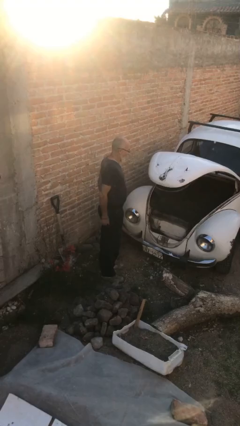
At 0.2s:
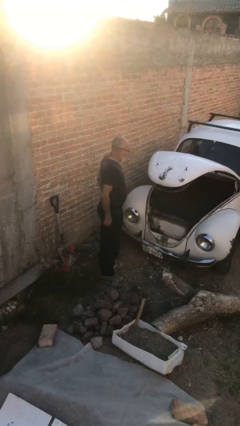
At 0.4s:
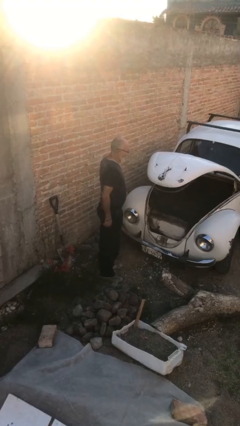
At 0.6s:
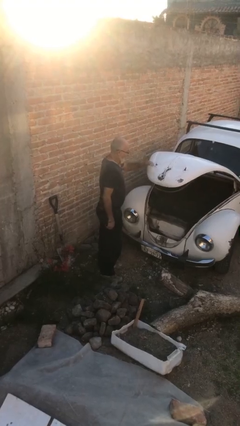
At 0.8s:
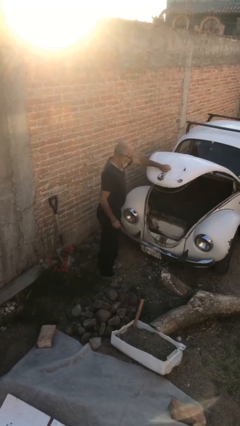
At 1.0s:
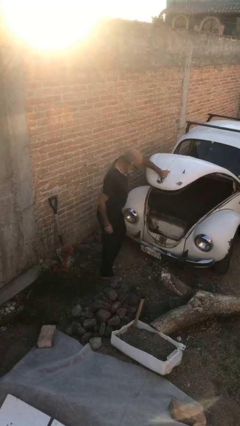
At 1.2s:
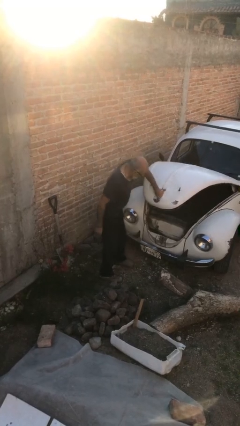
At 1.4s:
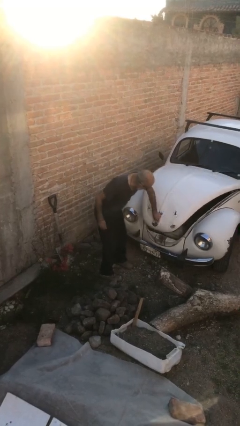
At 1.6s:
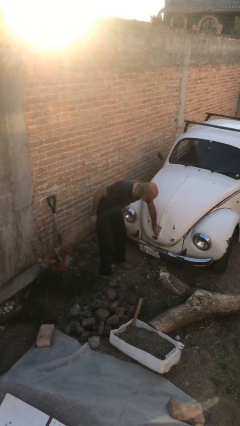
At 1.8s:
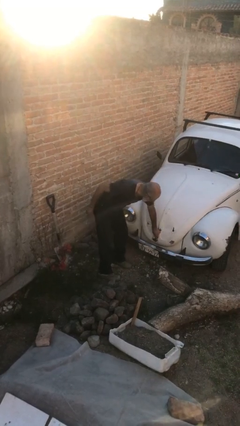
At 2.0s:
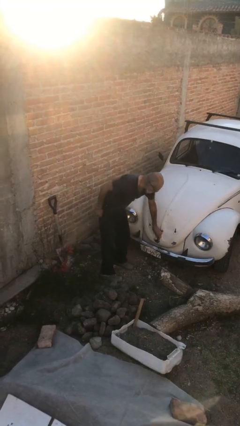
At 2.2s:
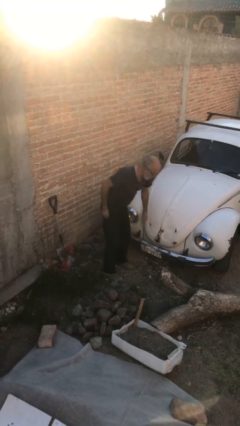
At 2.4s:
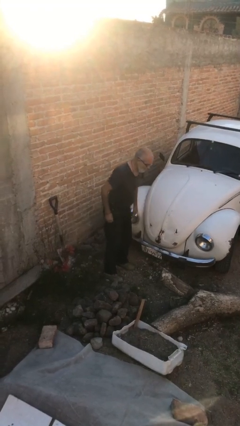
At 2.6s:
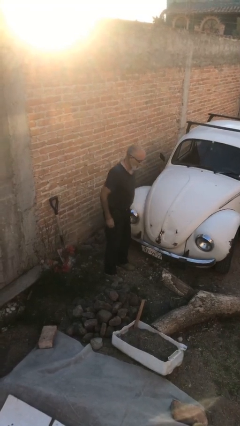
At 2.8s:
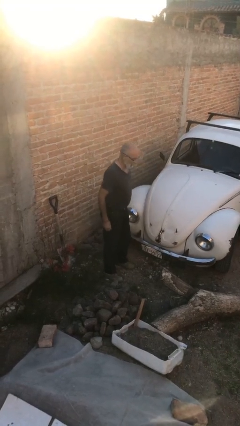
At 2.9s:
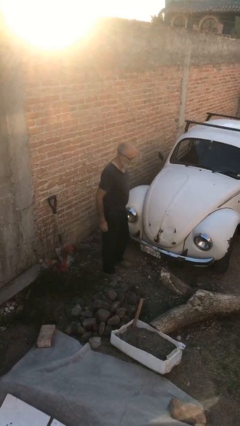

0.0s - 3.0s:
person closes car trunk

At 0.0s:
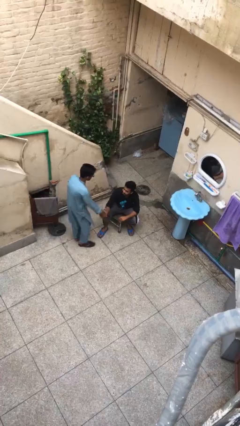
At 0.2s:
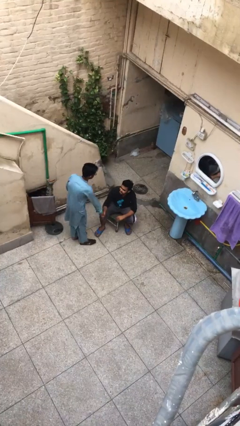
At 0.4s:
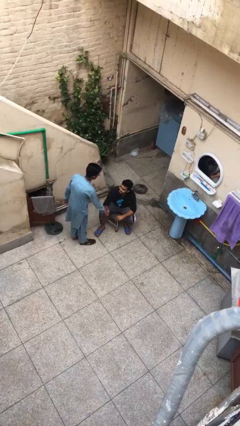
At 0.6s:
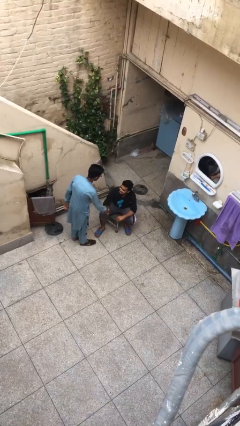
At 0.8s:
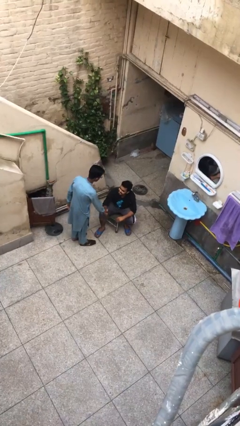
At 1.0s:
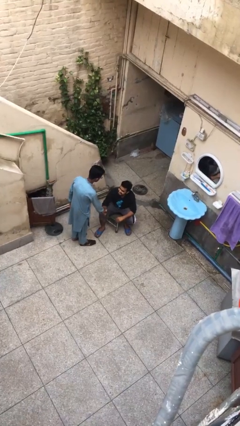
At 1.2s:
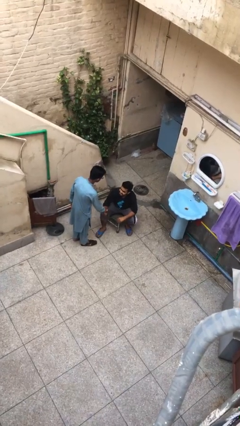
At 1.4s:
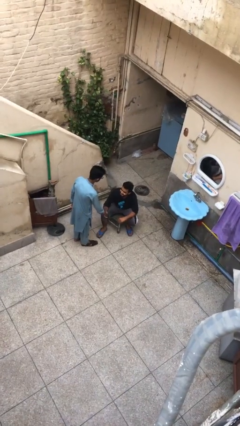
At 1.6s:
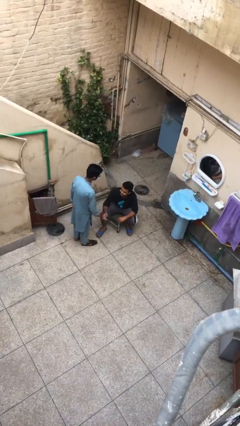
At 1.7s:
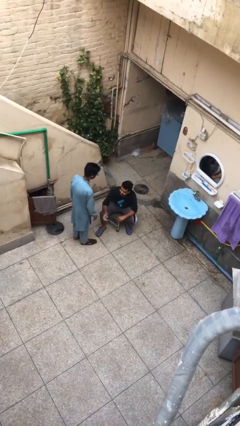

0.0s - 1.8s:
person shakes hand

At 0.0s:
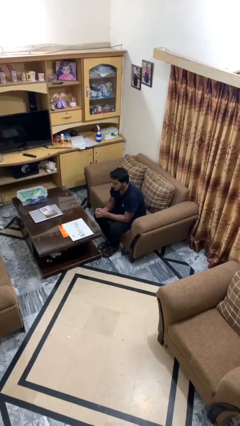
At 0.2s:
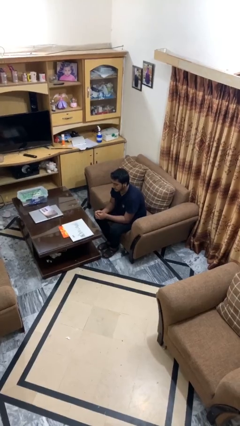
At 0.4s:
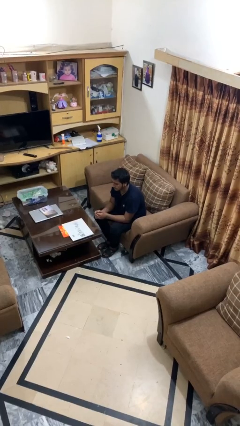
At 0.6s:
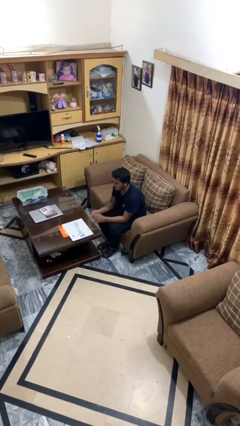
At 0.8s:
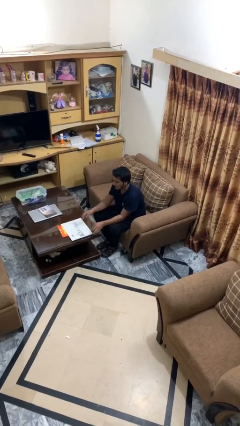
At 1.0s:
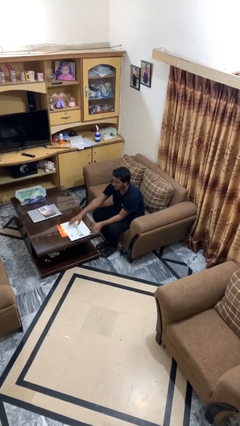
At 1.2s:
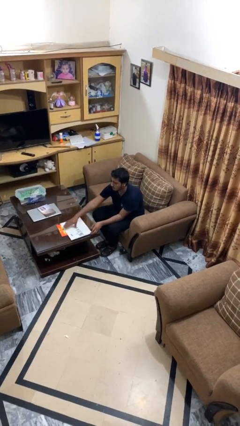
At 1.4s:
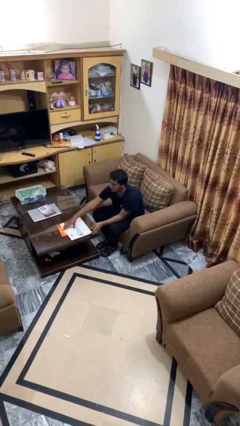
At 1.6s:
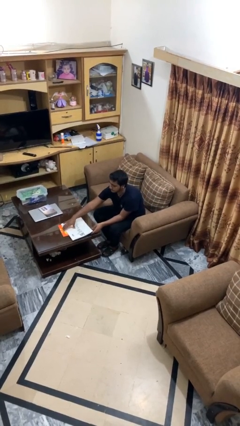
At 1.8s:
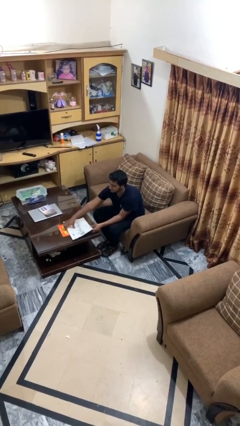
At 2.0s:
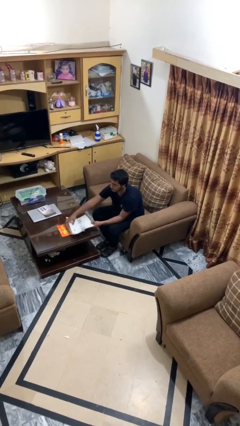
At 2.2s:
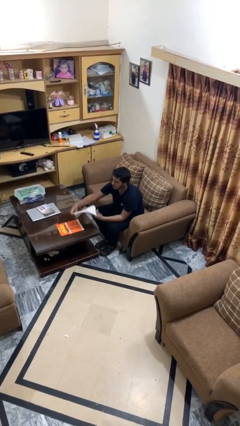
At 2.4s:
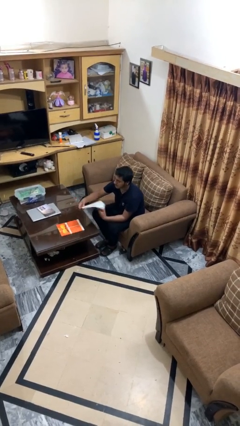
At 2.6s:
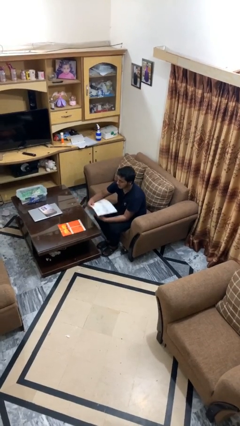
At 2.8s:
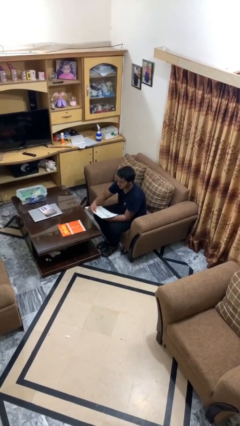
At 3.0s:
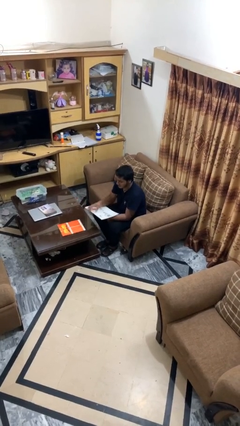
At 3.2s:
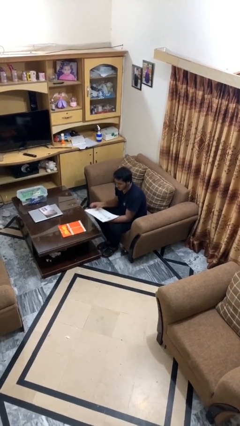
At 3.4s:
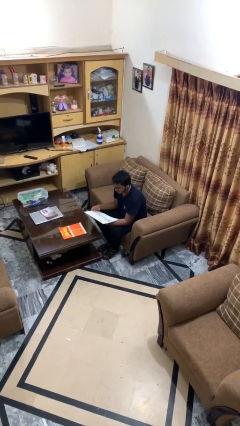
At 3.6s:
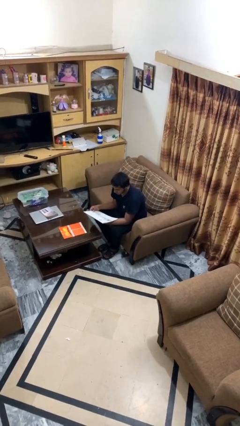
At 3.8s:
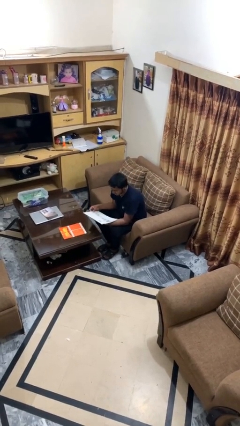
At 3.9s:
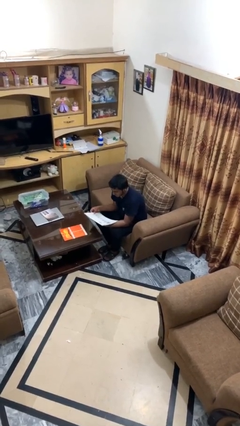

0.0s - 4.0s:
person picks up object from table

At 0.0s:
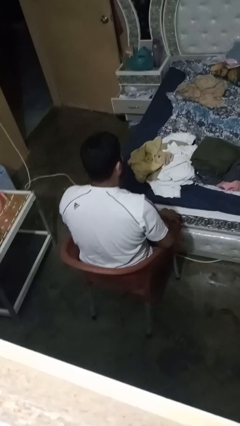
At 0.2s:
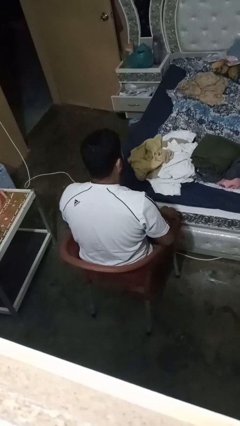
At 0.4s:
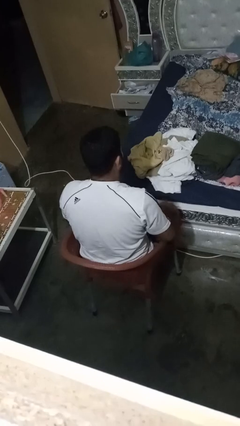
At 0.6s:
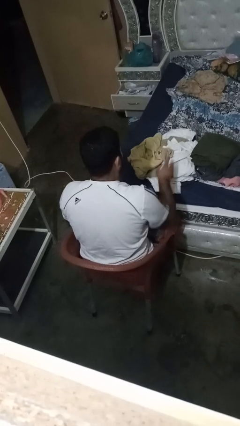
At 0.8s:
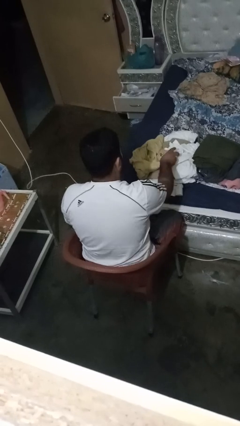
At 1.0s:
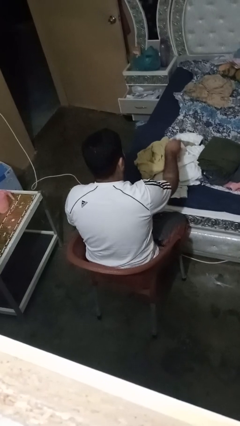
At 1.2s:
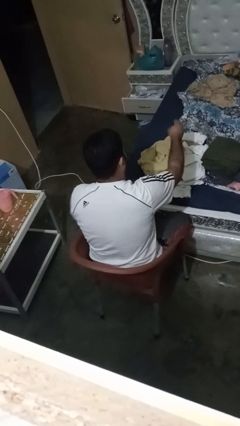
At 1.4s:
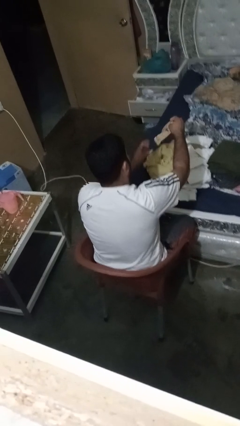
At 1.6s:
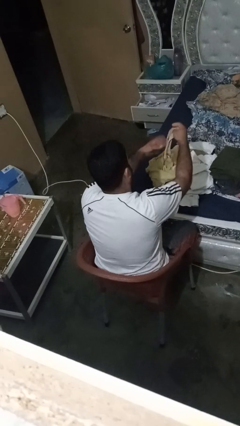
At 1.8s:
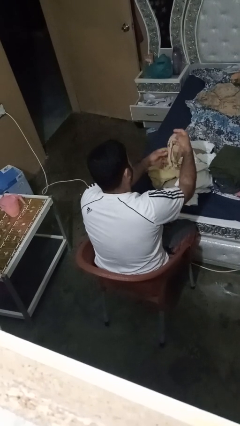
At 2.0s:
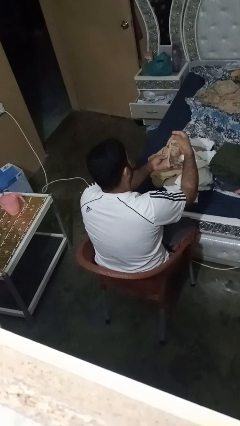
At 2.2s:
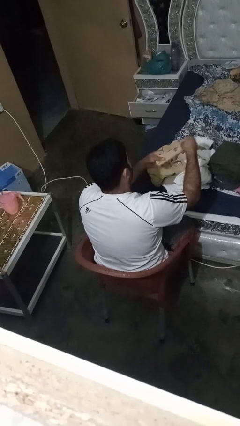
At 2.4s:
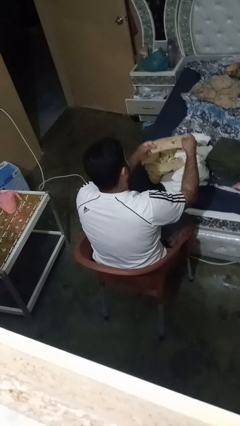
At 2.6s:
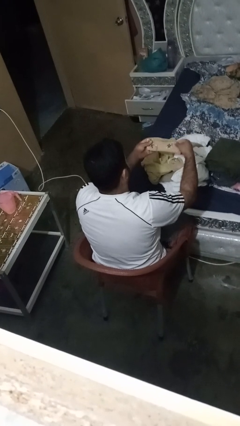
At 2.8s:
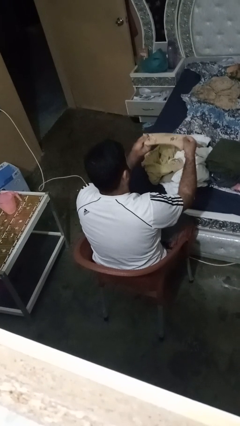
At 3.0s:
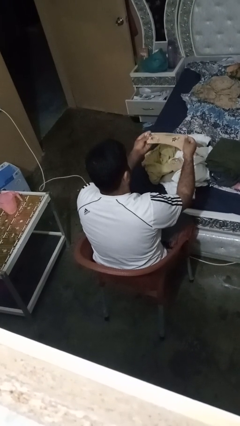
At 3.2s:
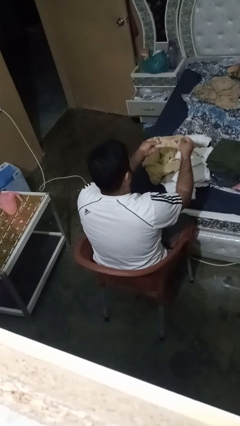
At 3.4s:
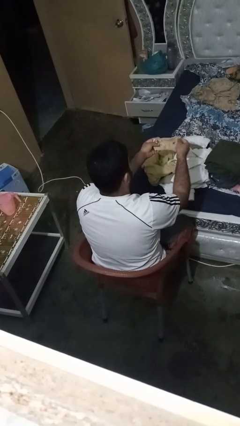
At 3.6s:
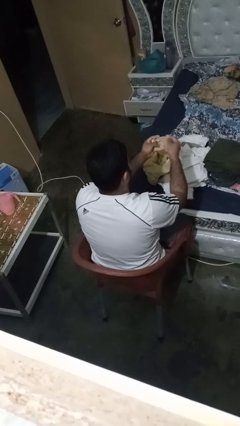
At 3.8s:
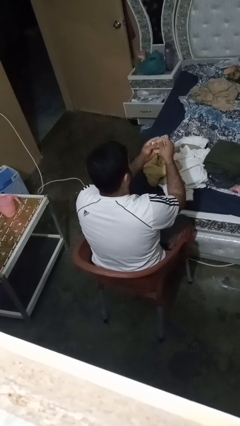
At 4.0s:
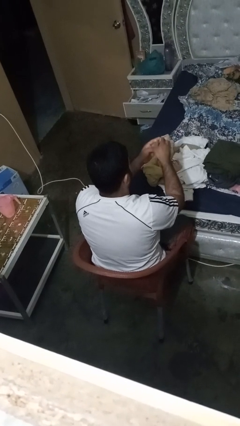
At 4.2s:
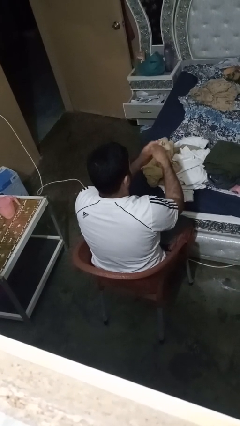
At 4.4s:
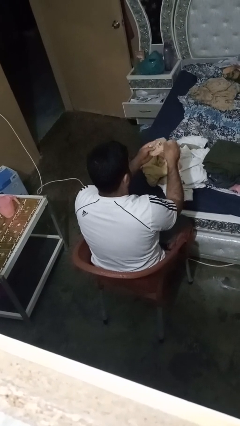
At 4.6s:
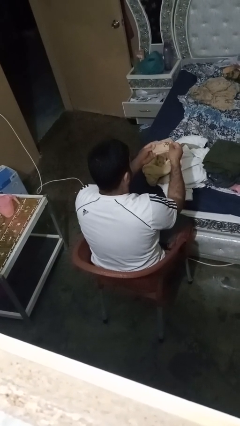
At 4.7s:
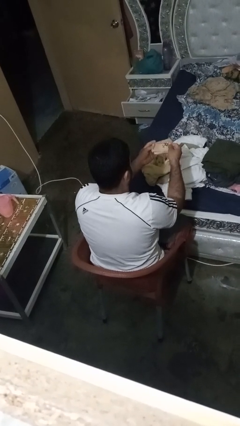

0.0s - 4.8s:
person folds socks

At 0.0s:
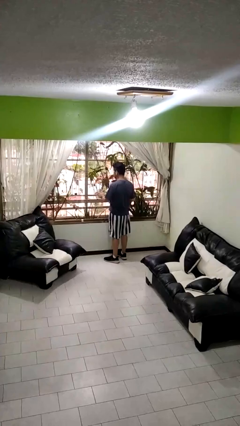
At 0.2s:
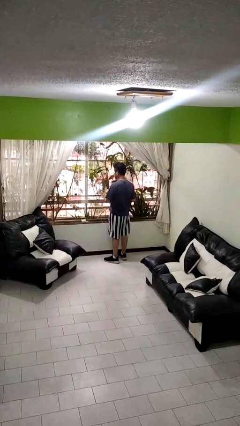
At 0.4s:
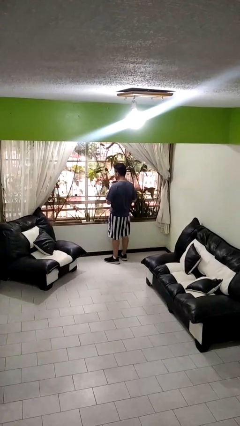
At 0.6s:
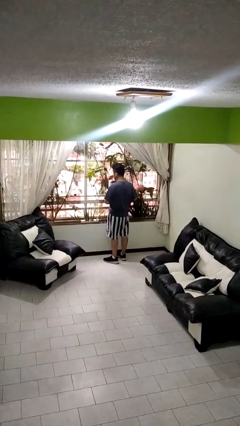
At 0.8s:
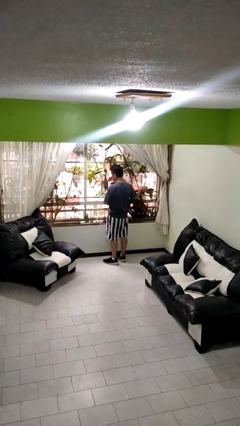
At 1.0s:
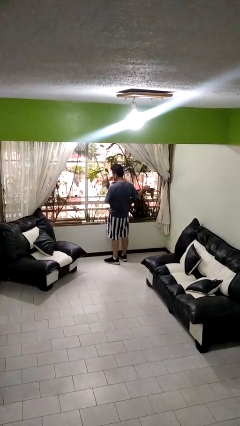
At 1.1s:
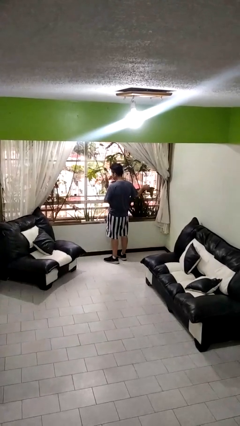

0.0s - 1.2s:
person opens home window

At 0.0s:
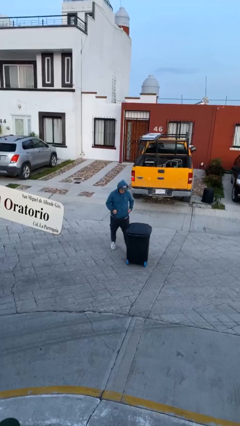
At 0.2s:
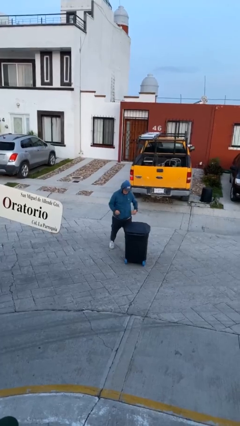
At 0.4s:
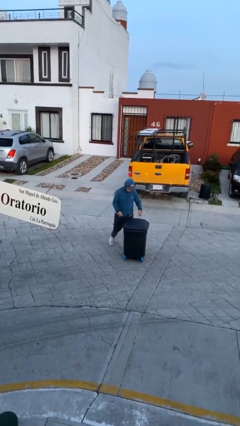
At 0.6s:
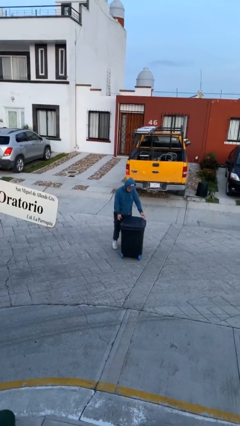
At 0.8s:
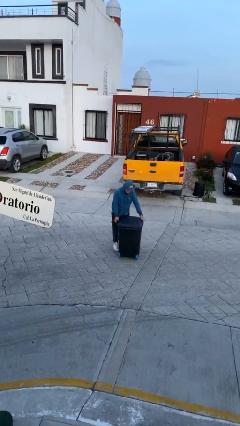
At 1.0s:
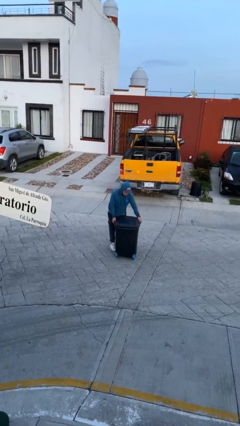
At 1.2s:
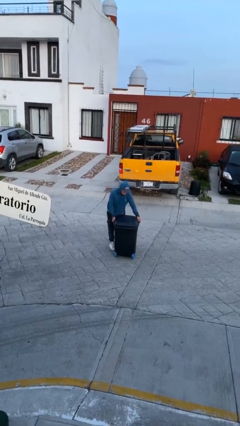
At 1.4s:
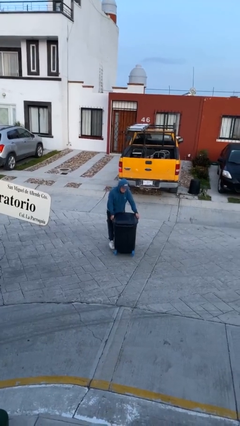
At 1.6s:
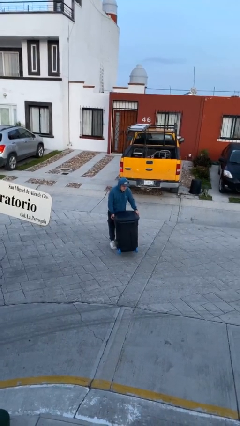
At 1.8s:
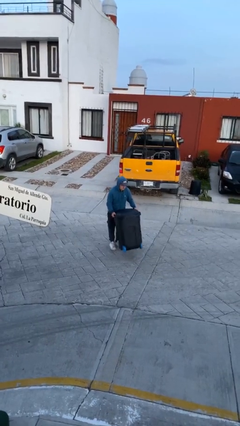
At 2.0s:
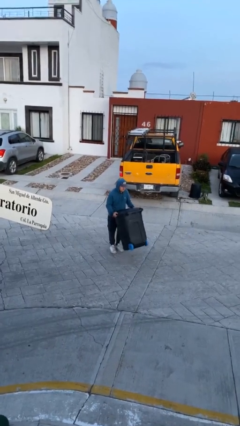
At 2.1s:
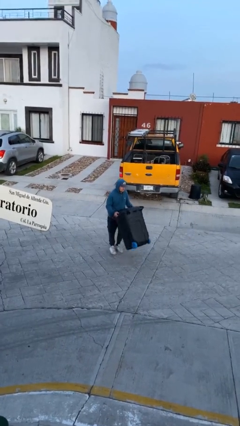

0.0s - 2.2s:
person picks up object from floor

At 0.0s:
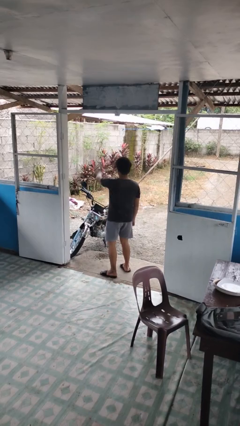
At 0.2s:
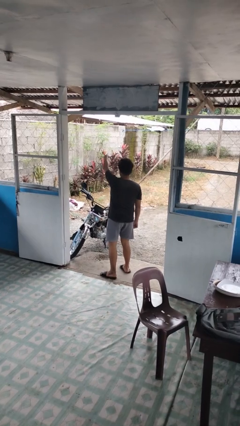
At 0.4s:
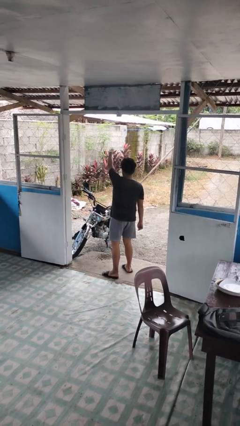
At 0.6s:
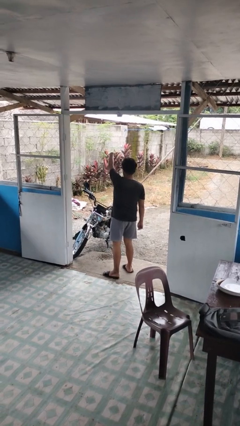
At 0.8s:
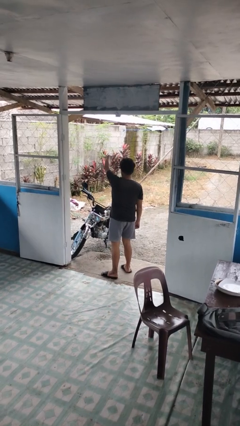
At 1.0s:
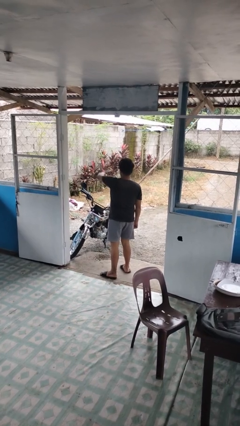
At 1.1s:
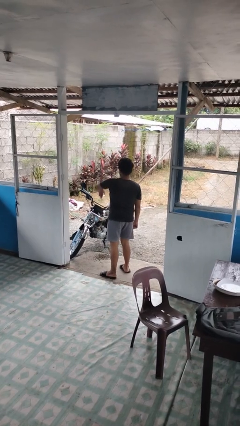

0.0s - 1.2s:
person gestures come here
